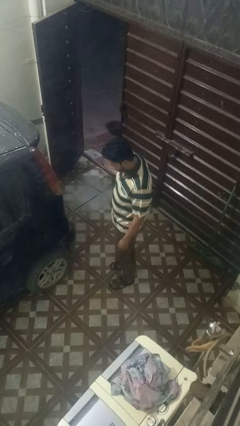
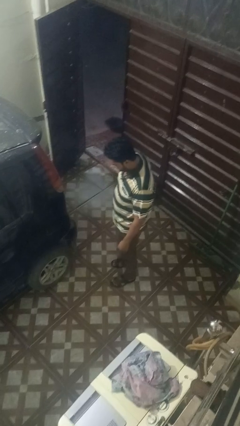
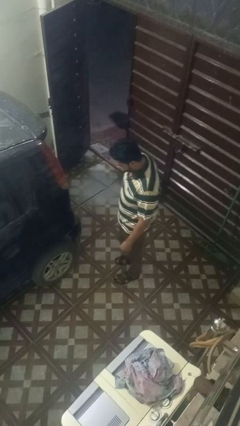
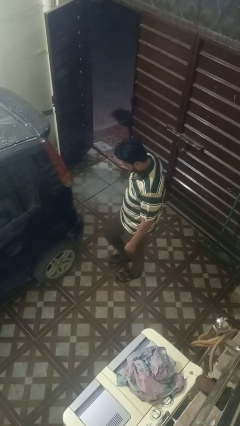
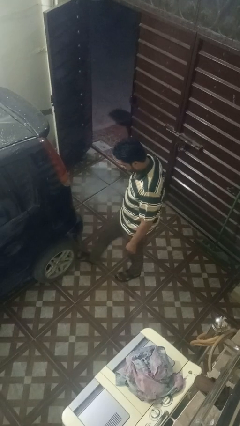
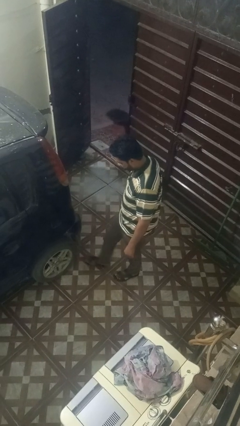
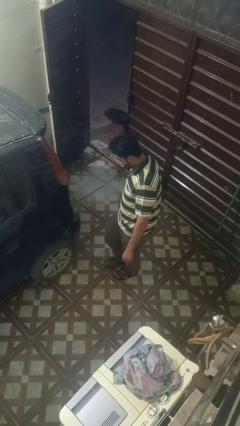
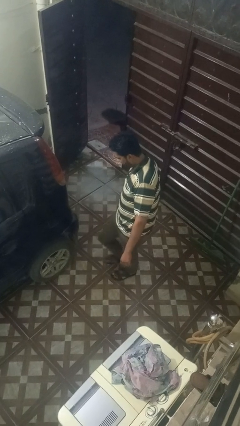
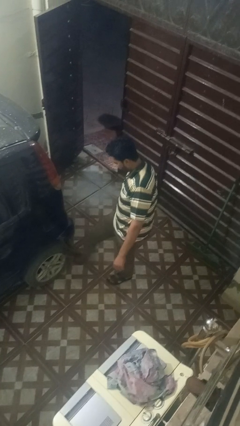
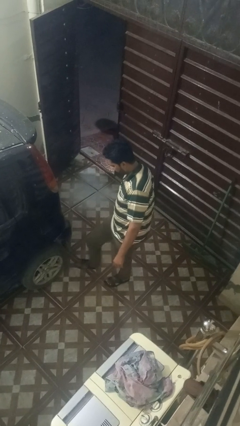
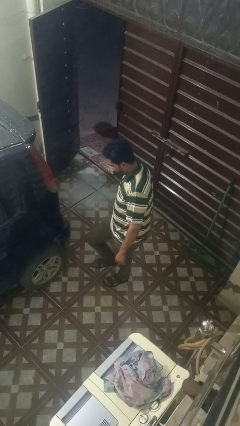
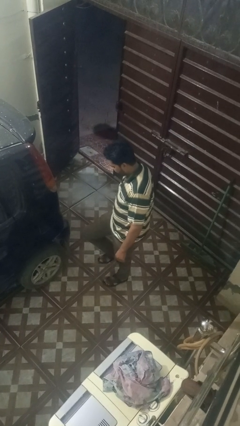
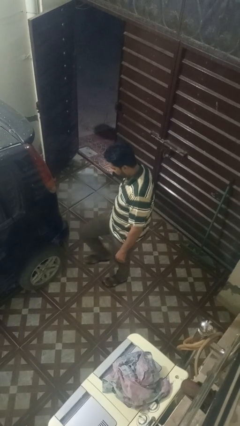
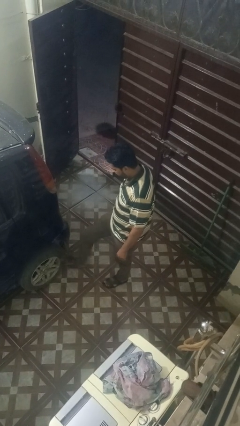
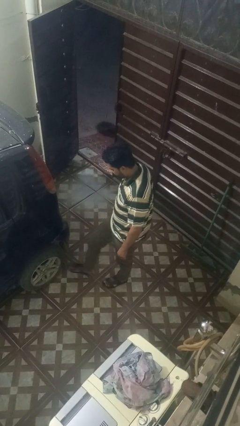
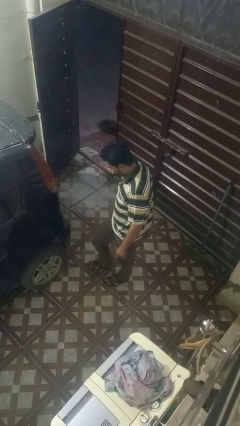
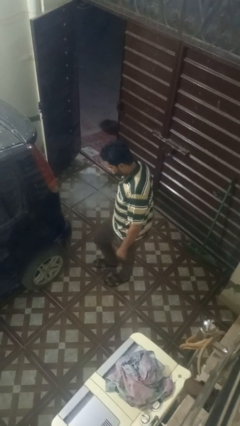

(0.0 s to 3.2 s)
person kicks car tires

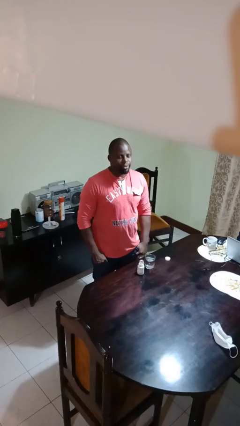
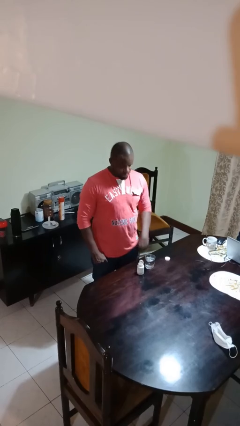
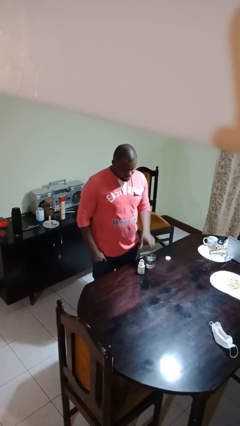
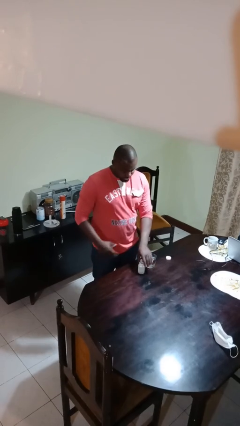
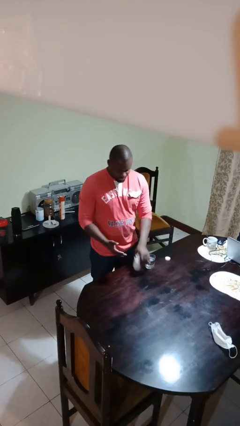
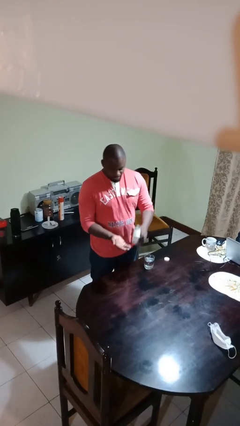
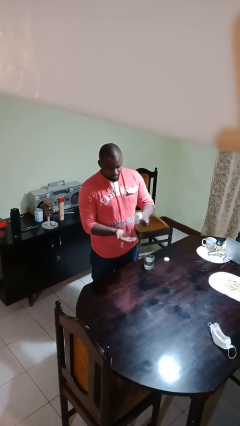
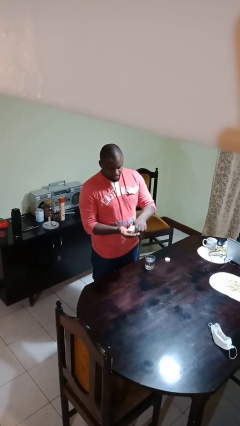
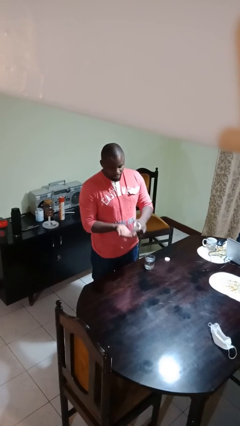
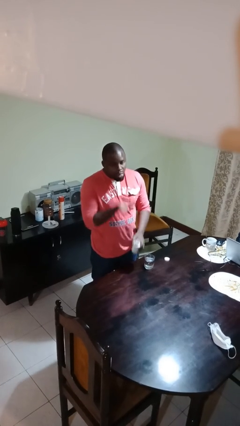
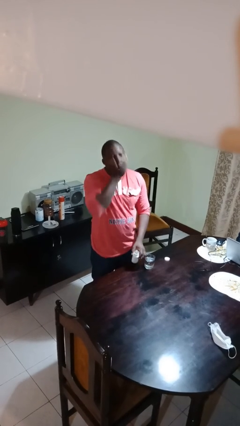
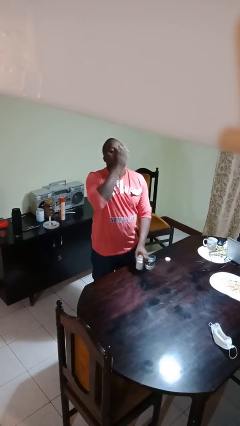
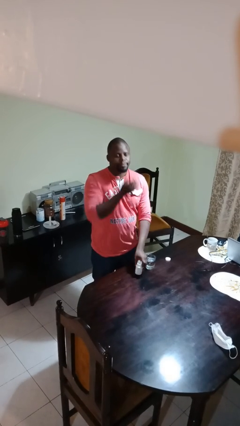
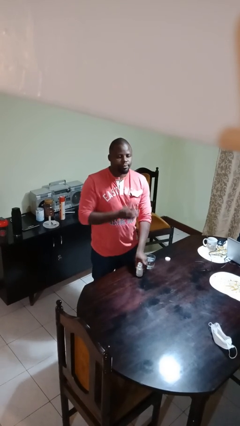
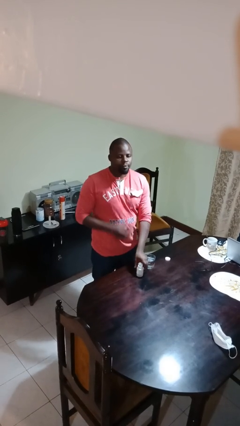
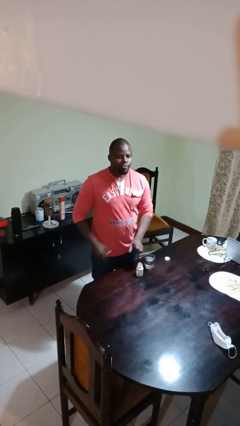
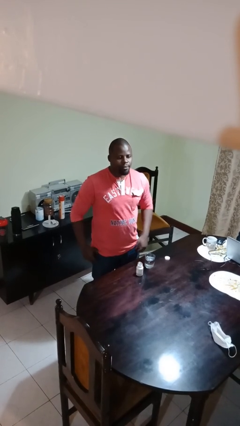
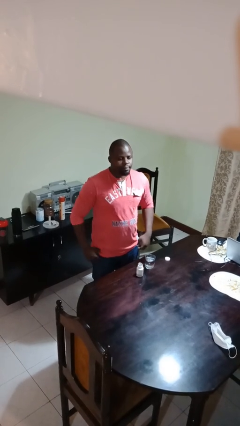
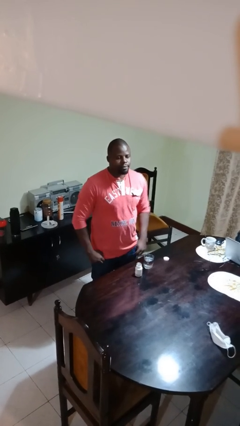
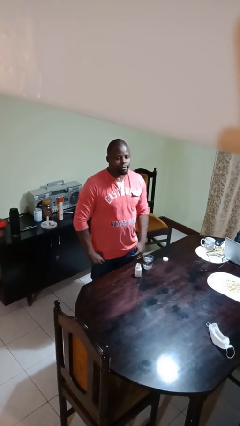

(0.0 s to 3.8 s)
person takes medicine pills

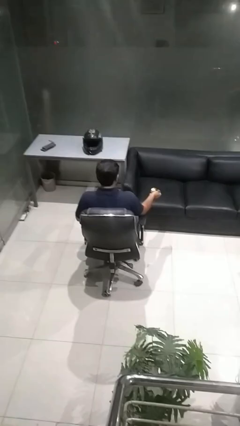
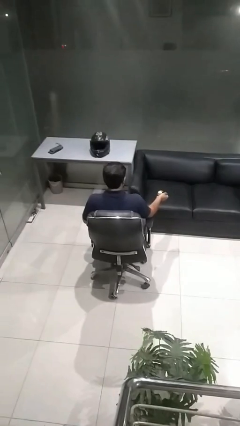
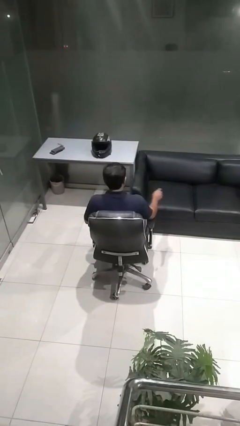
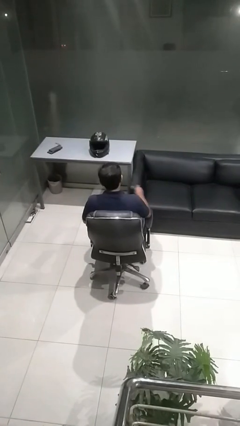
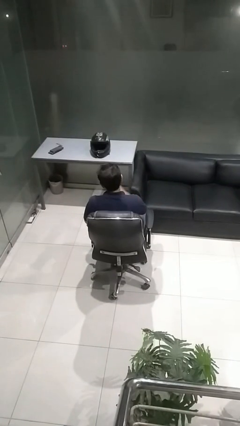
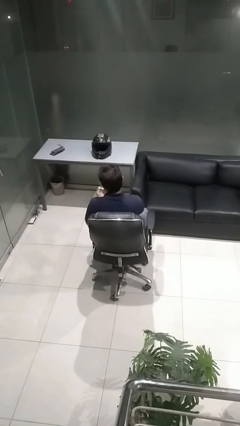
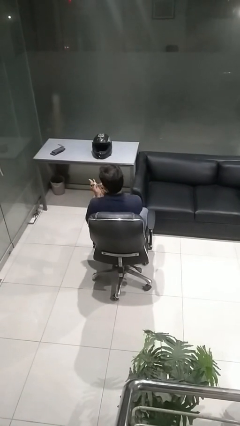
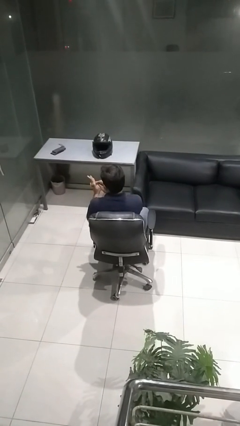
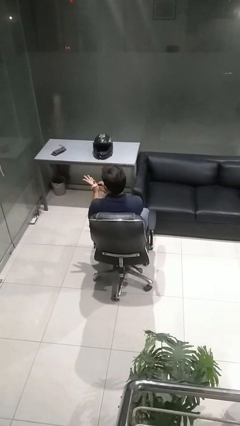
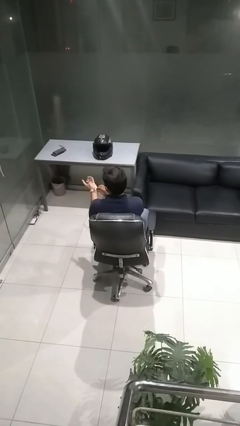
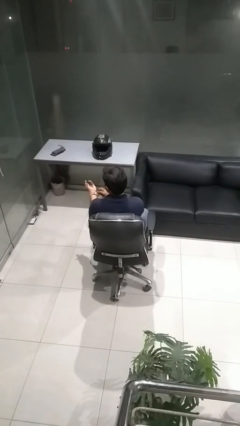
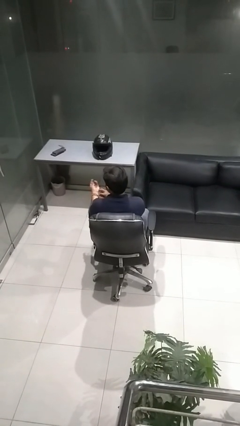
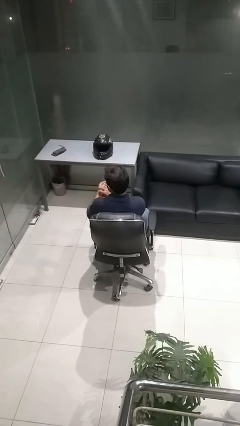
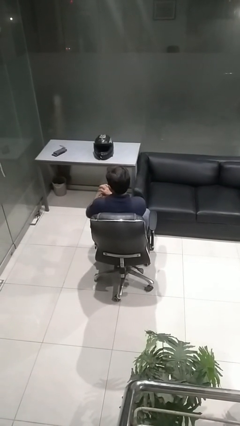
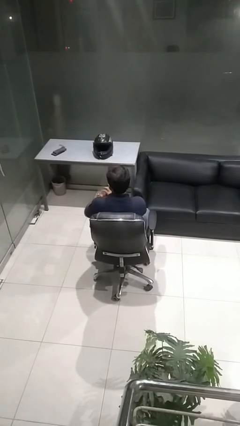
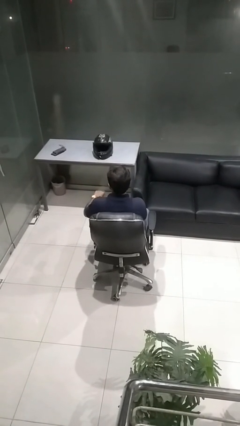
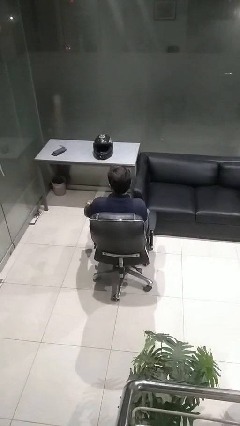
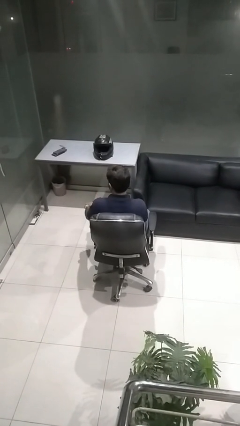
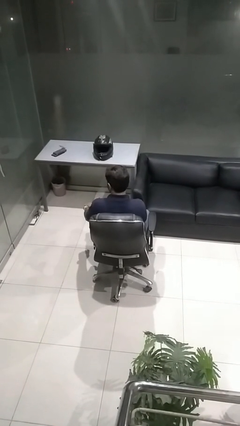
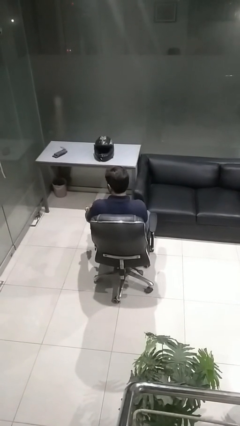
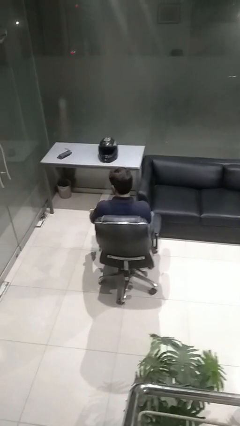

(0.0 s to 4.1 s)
person puts on wristwatch

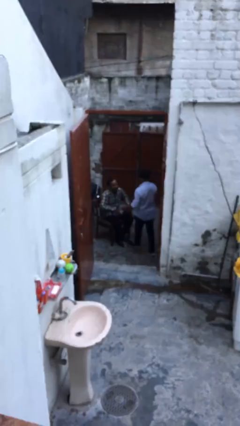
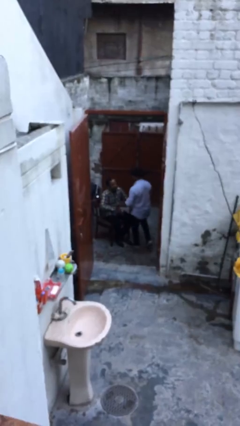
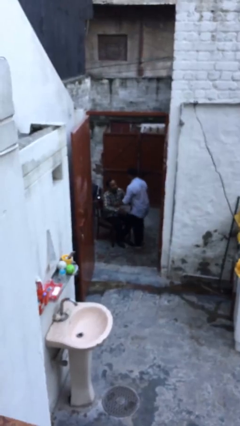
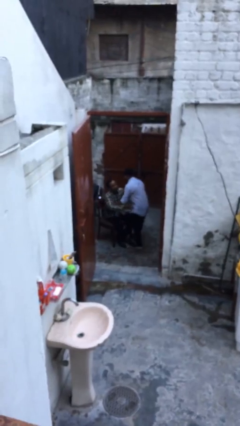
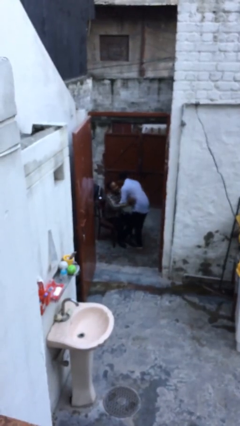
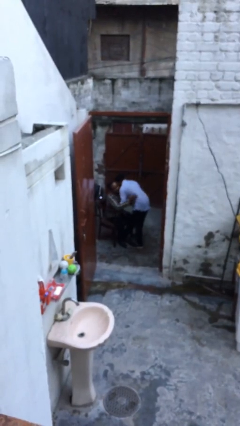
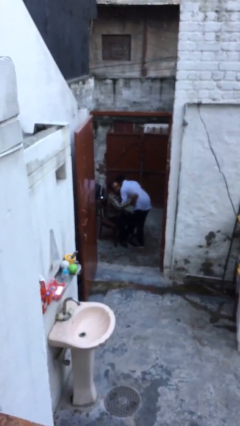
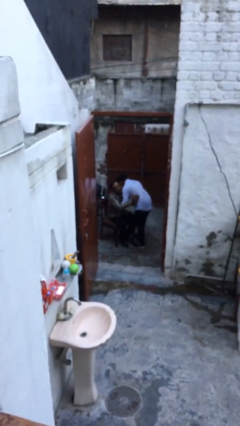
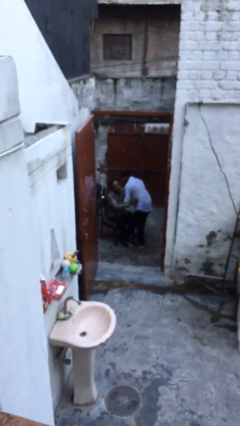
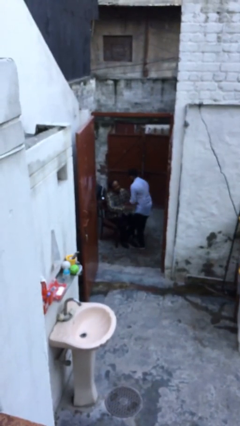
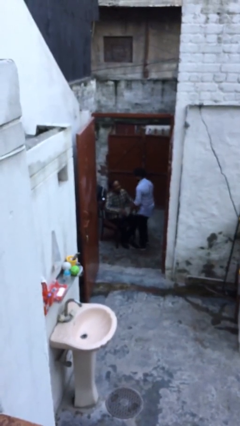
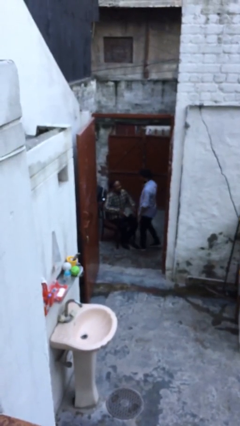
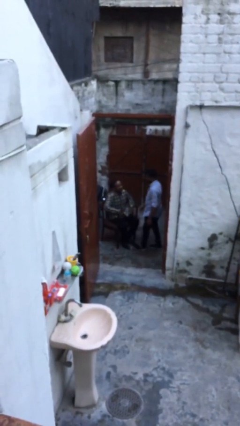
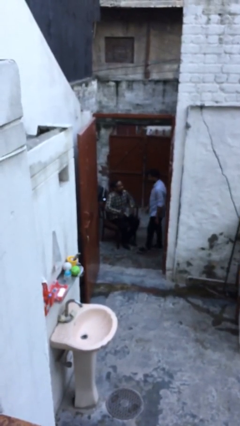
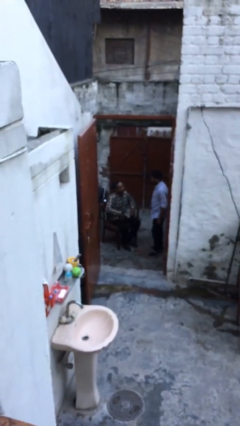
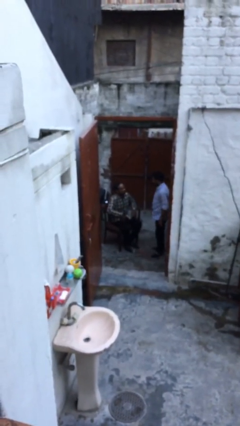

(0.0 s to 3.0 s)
person embraces person

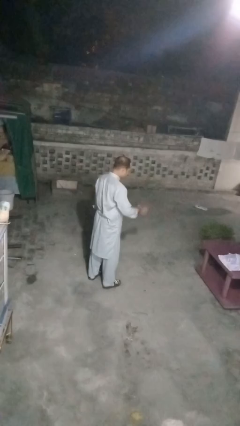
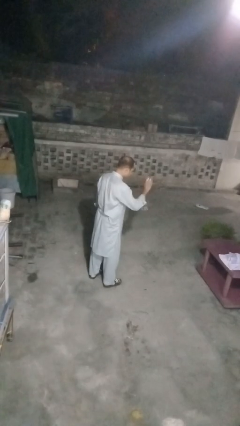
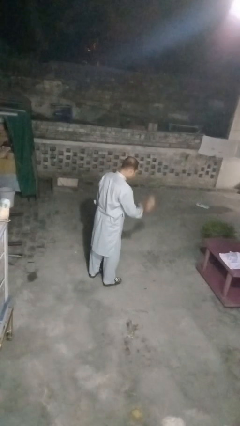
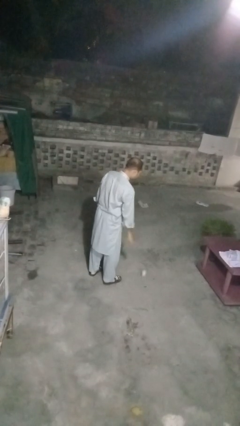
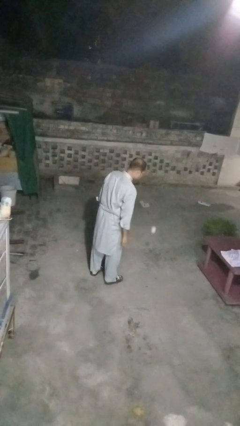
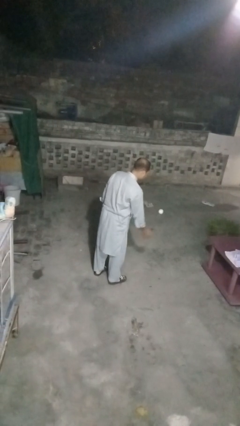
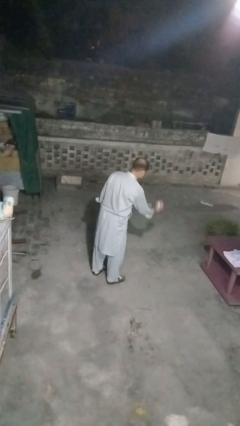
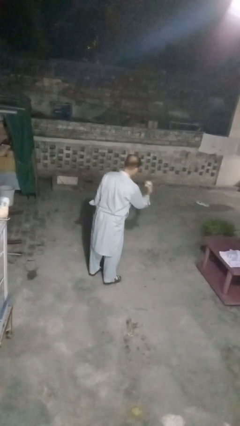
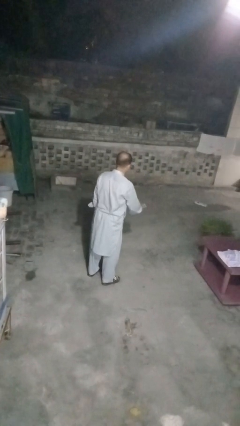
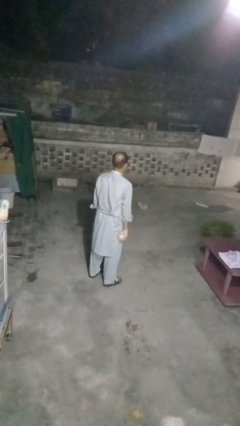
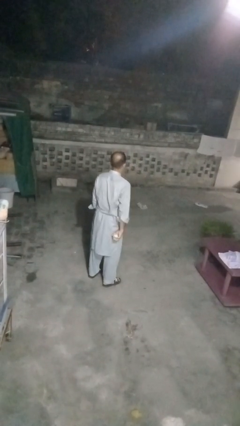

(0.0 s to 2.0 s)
person bounces ball on floor

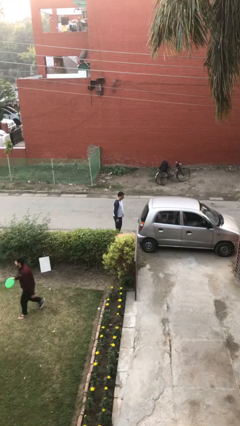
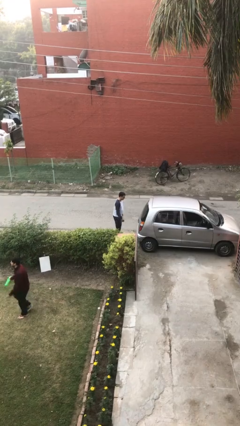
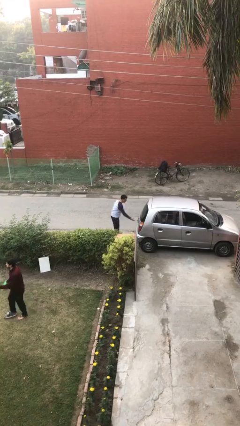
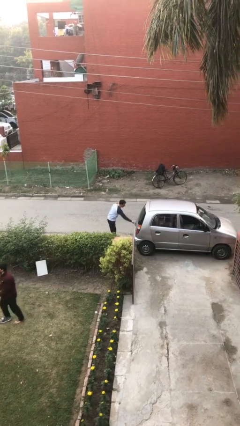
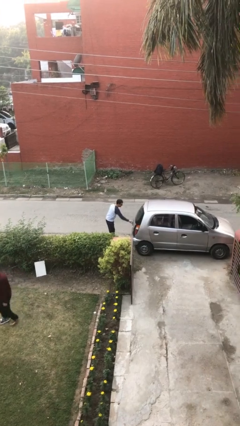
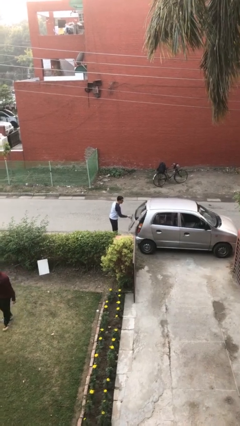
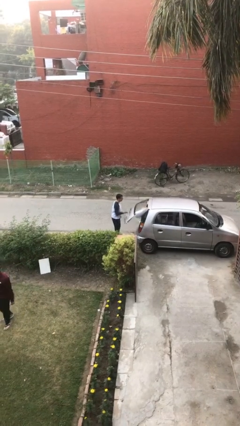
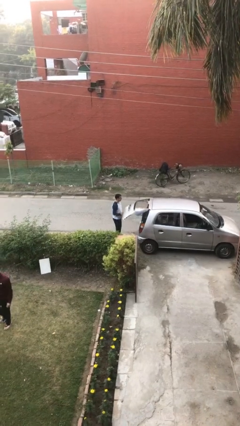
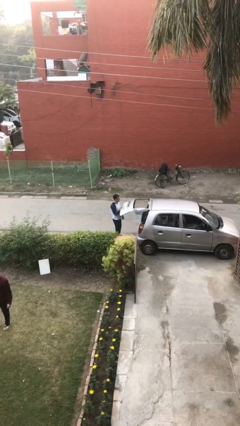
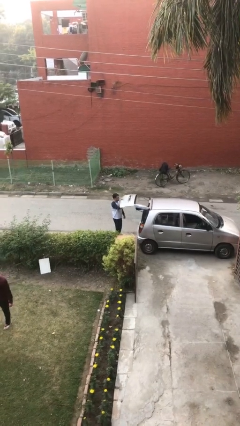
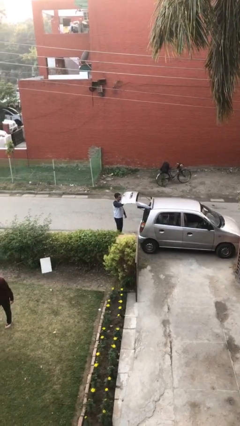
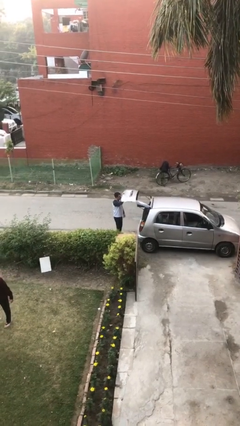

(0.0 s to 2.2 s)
person opens car trunk
